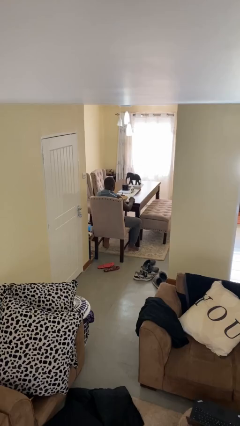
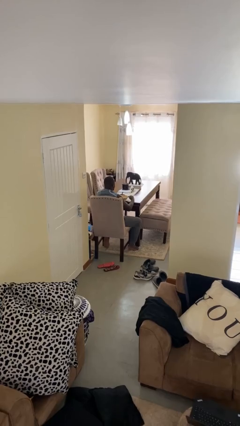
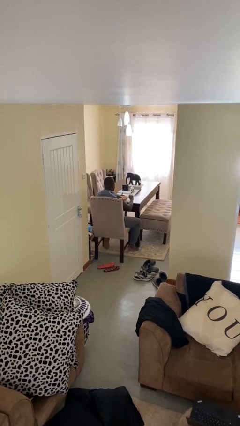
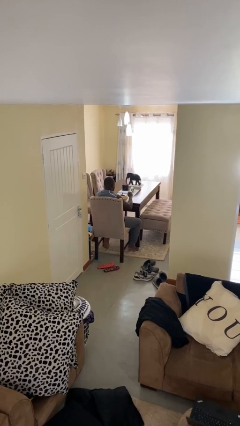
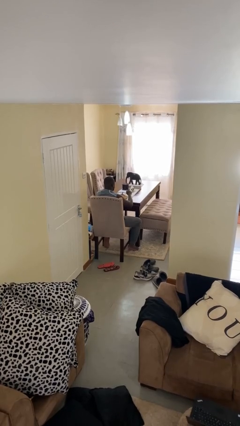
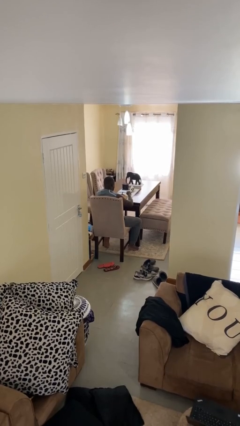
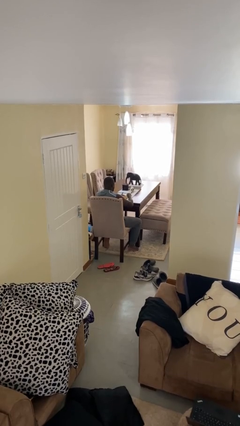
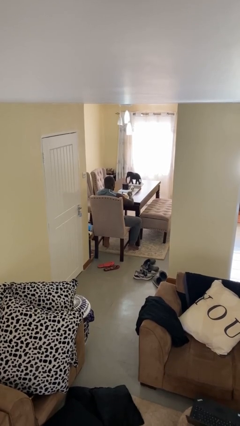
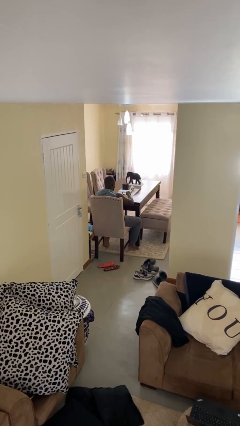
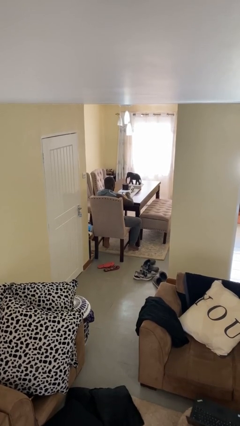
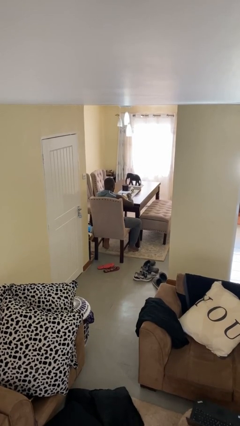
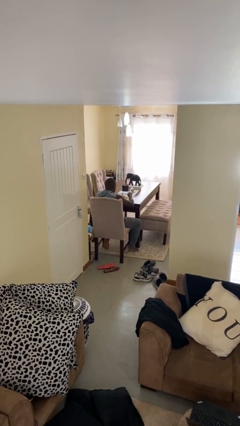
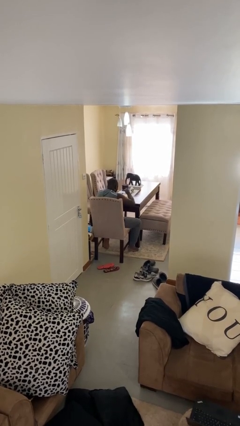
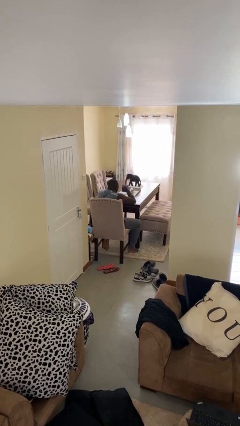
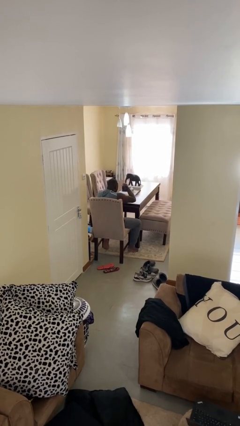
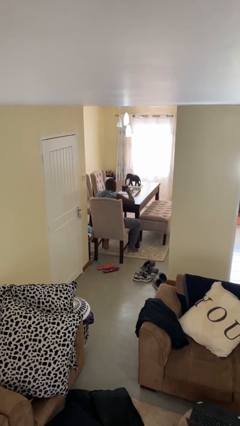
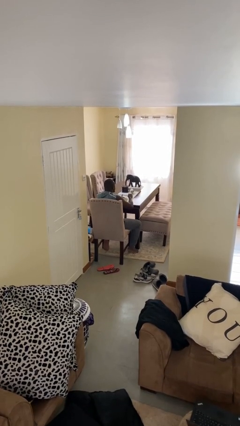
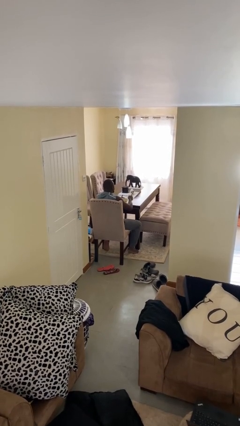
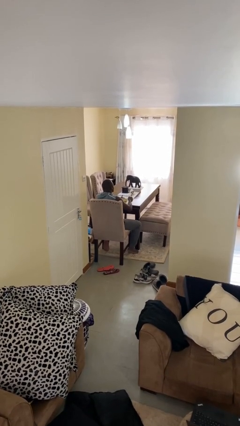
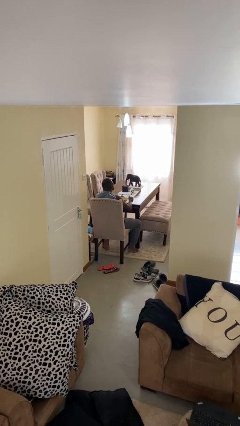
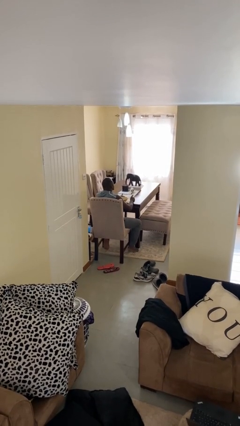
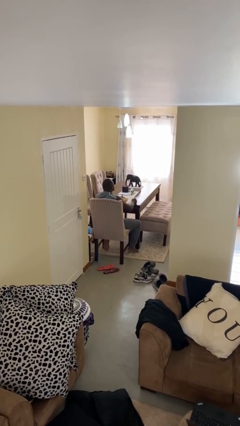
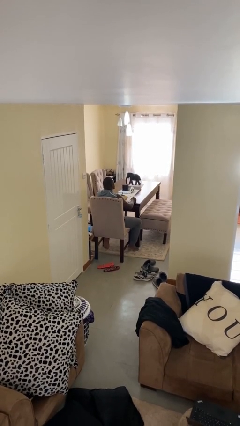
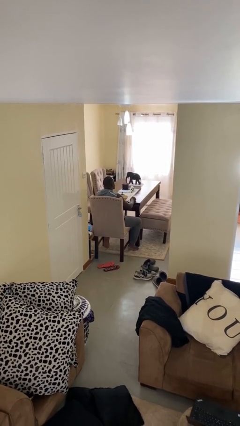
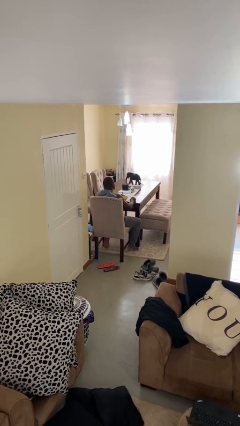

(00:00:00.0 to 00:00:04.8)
person eats with utensil

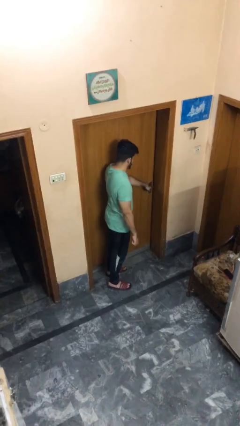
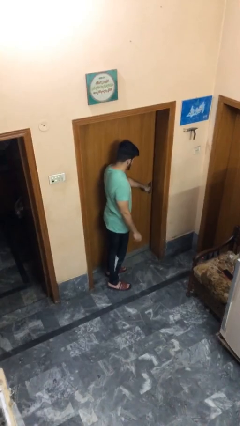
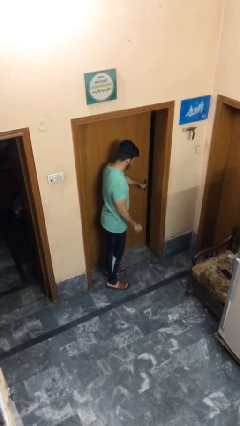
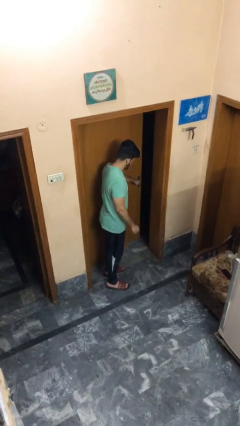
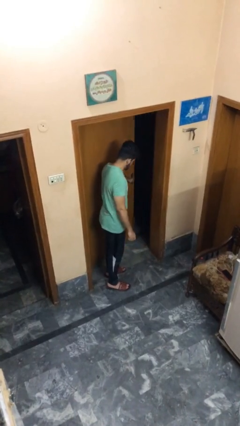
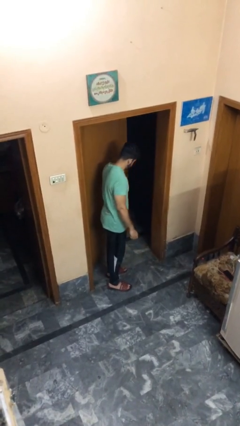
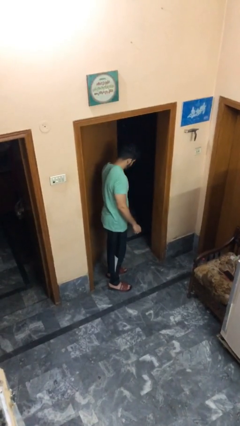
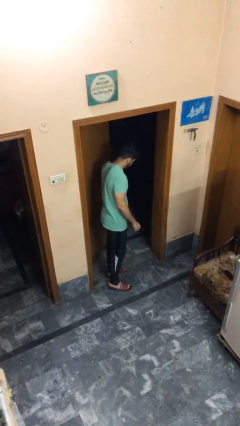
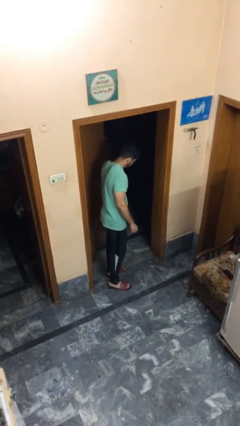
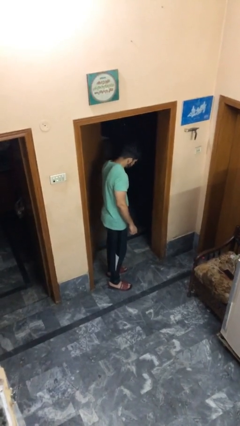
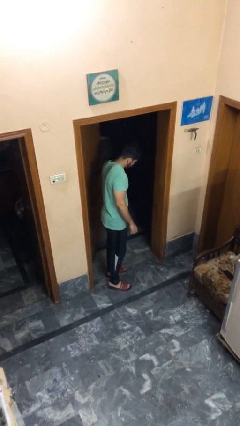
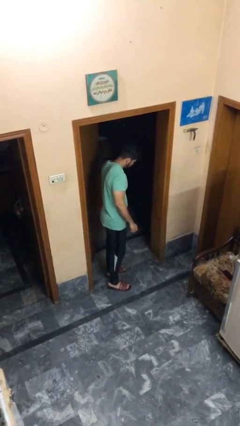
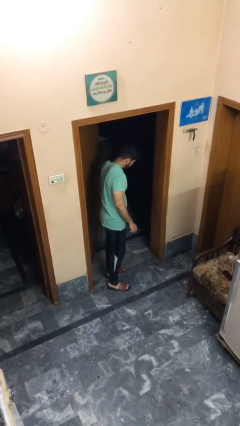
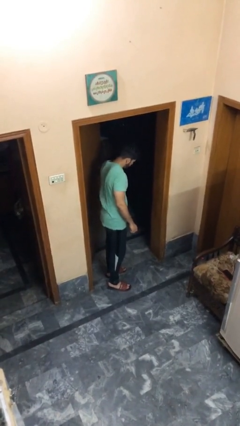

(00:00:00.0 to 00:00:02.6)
person opens facility door

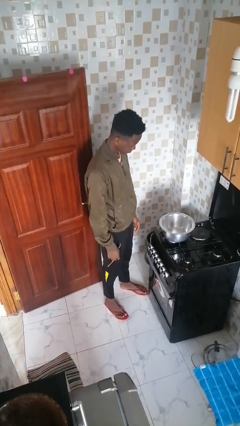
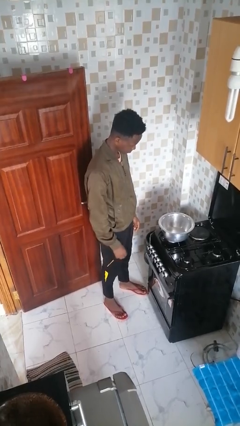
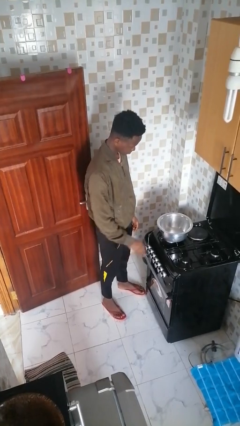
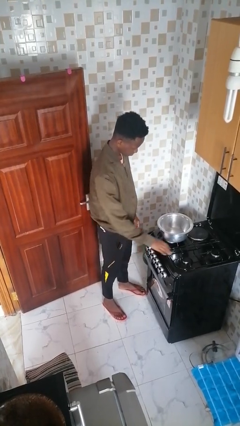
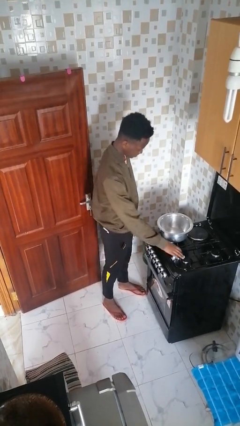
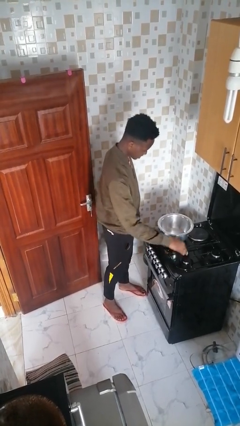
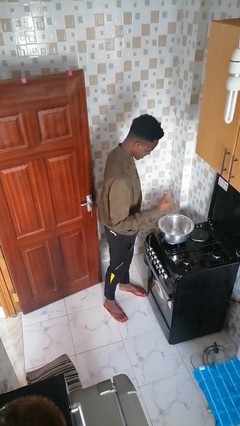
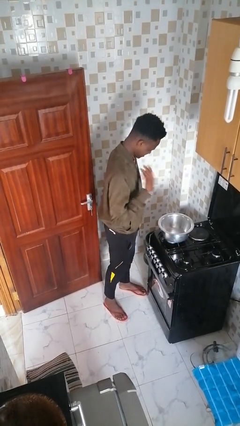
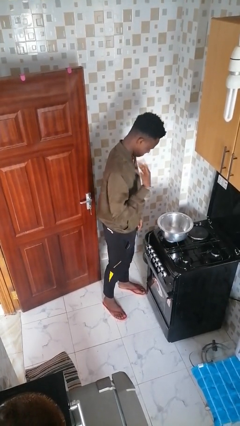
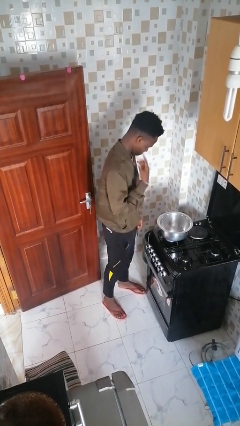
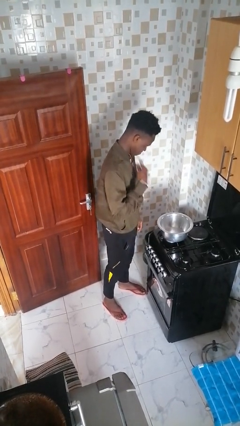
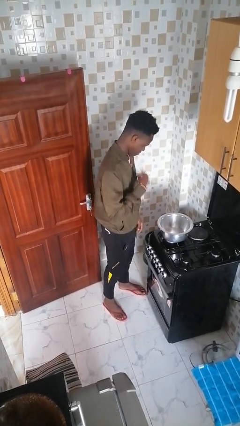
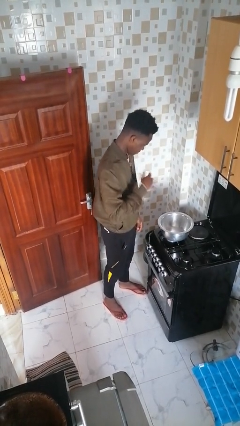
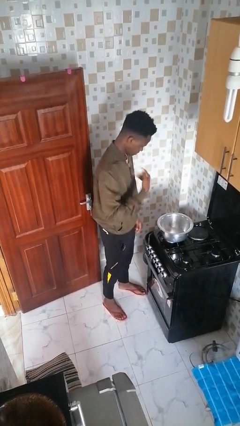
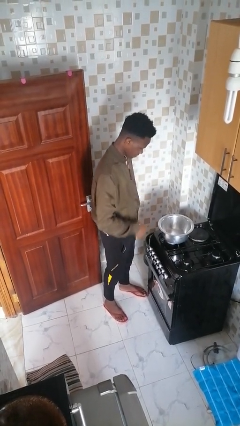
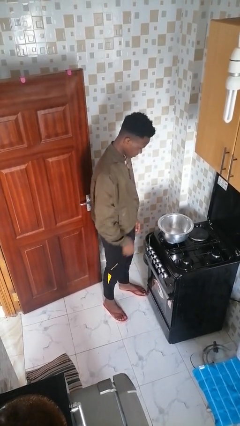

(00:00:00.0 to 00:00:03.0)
person burns hand

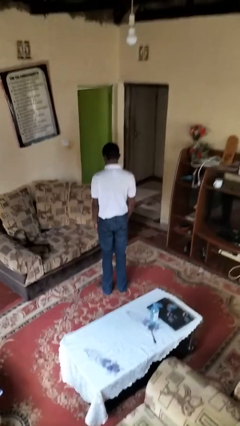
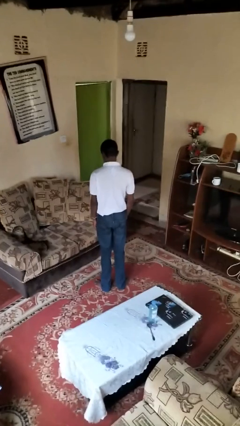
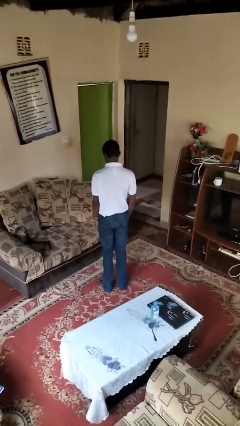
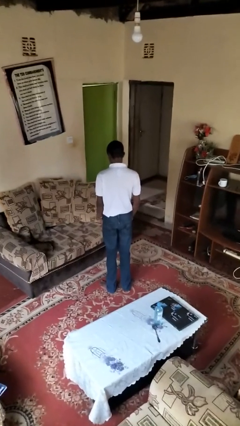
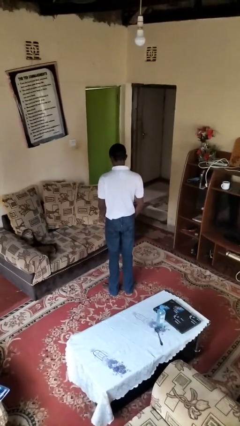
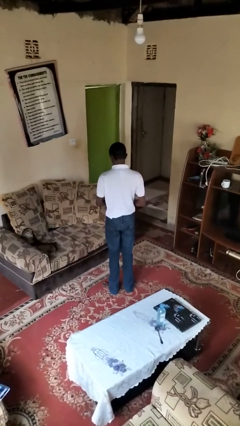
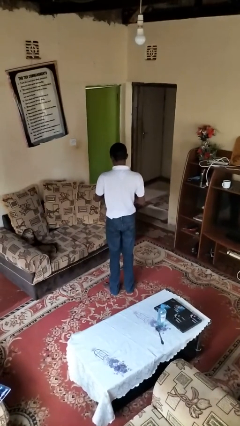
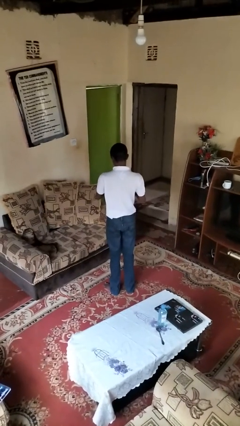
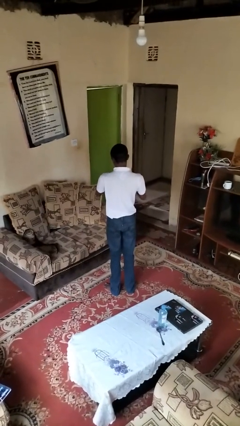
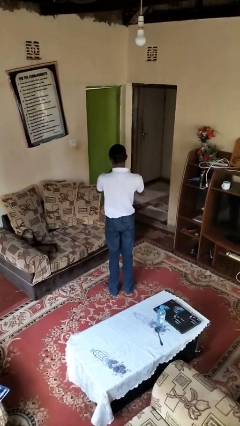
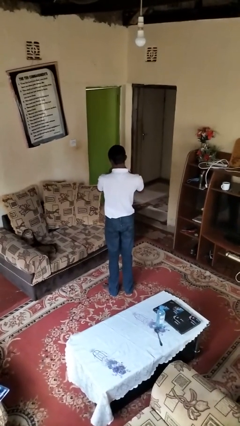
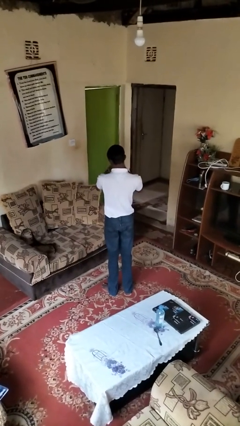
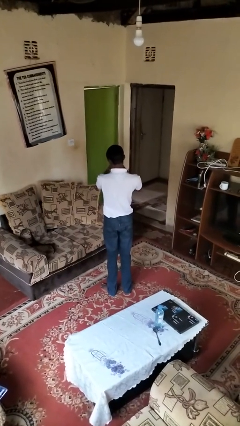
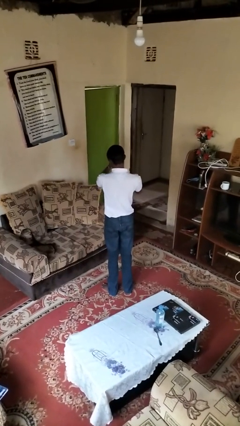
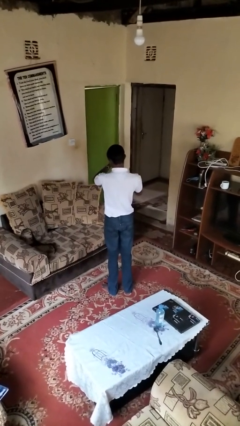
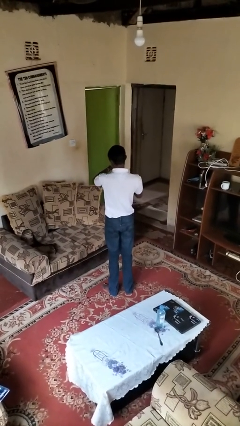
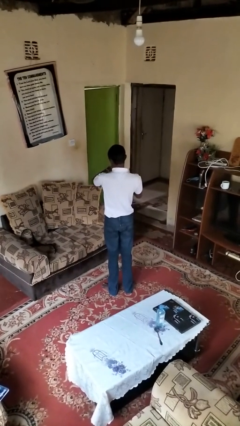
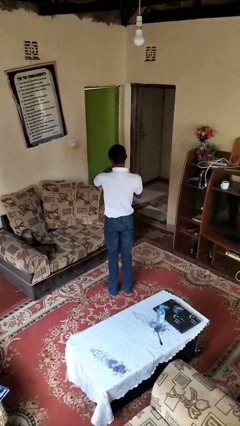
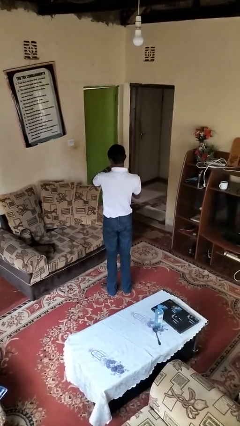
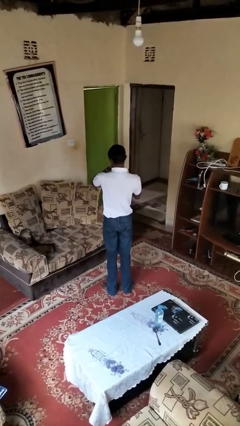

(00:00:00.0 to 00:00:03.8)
person puts on wristwatch

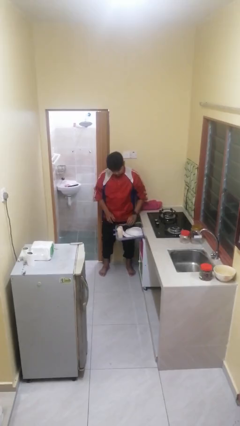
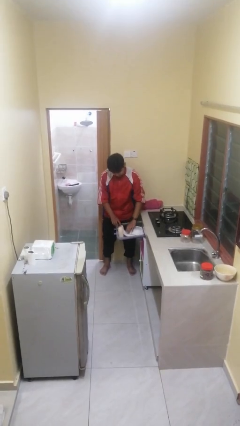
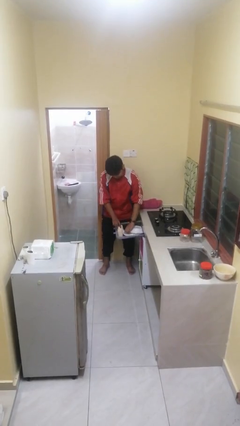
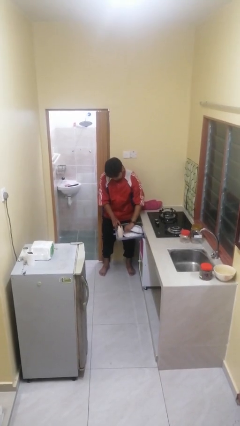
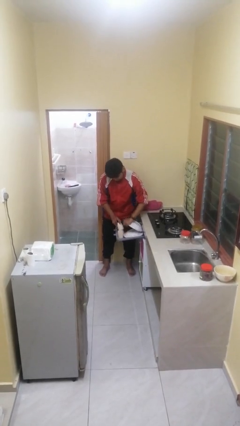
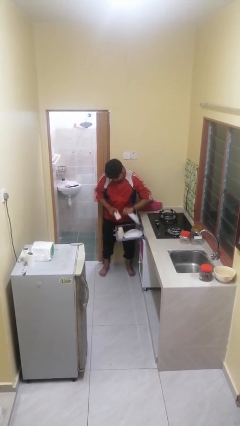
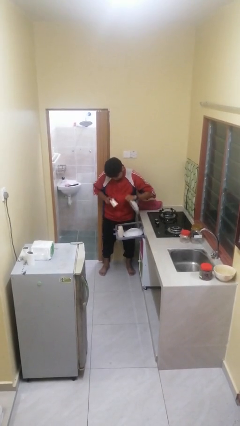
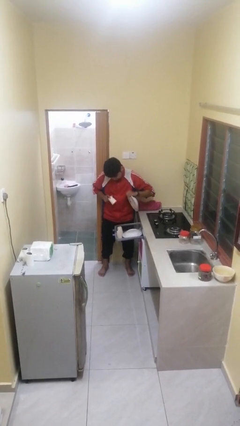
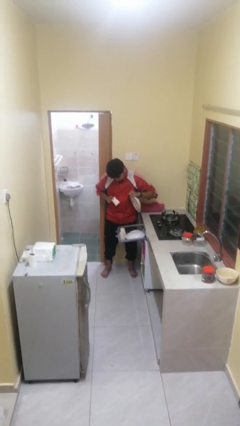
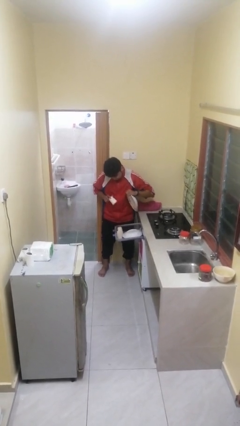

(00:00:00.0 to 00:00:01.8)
person takes object from kitchen drawer

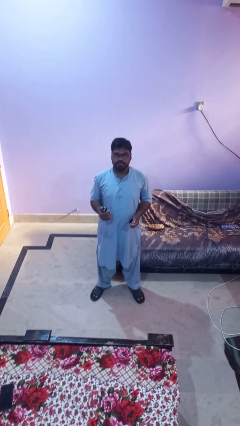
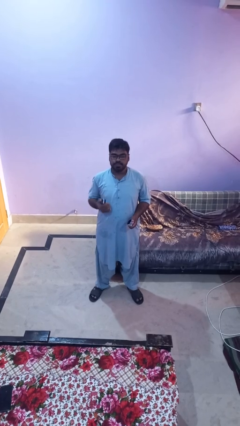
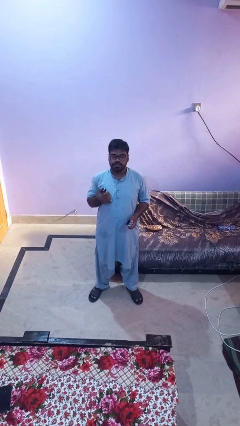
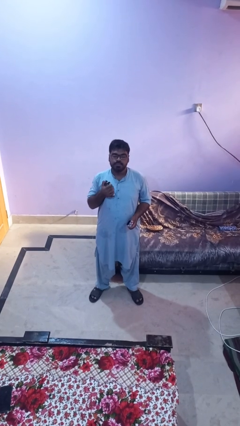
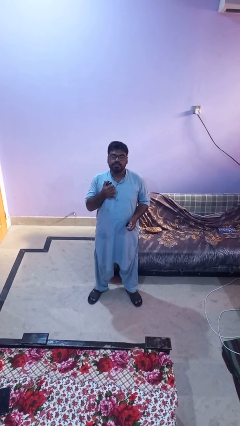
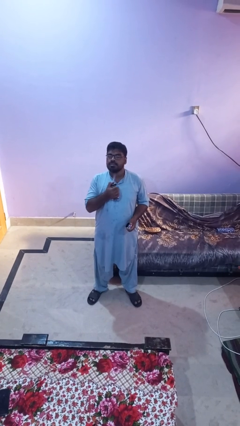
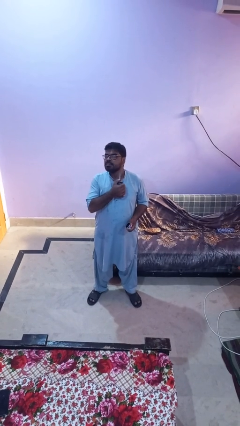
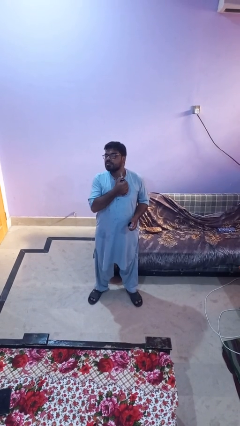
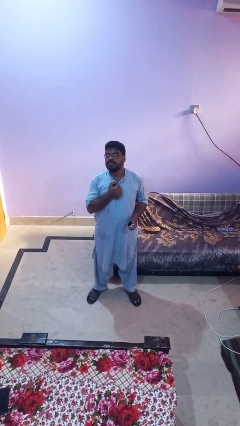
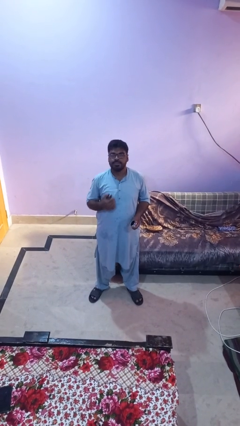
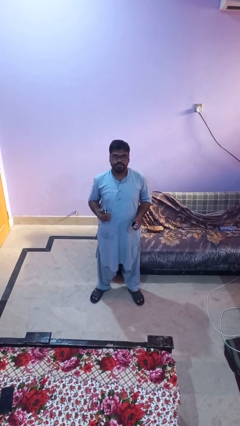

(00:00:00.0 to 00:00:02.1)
person applies deodorant
